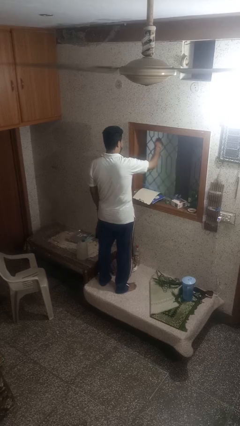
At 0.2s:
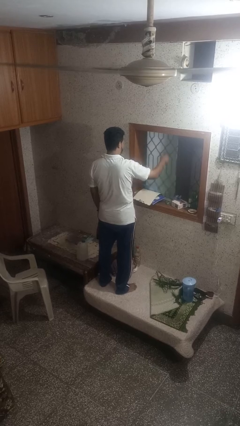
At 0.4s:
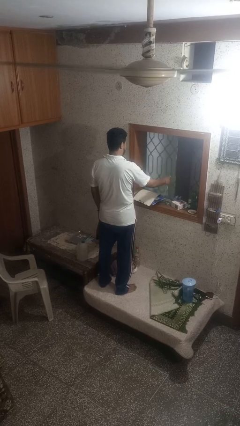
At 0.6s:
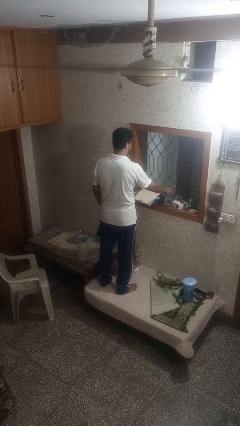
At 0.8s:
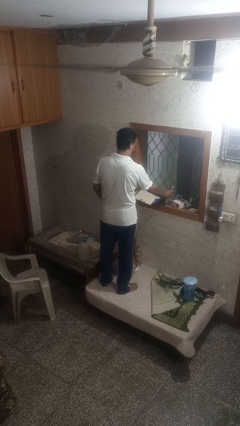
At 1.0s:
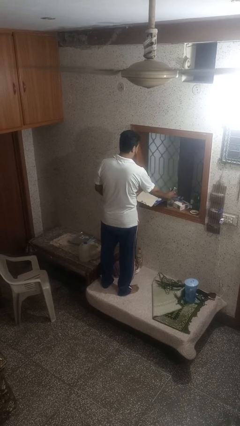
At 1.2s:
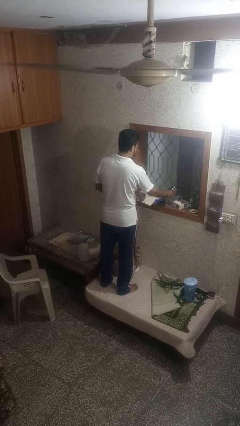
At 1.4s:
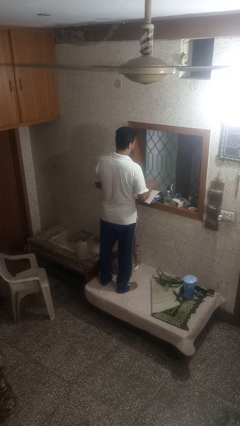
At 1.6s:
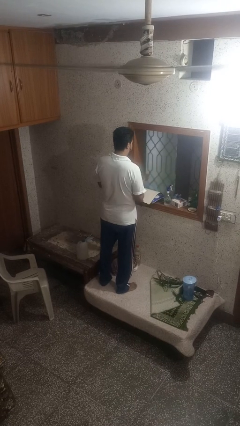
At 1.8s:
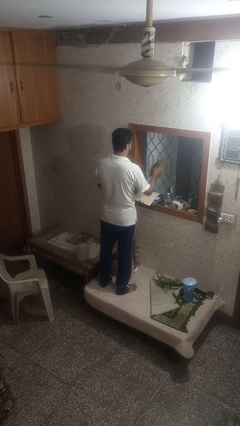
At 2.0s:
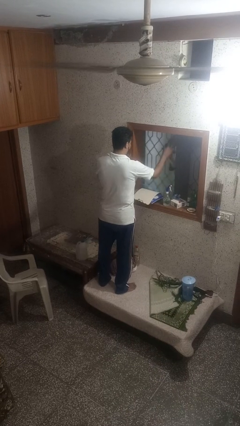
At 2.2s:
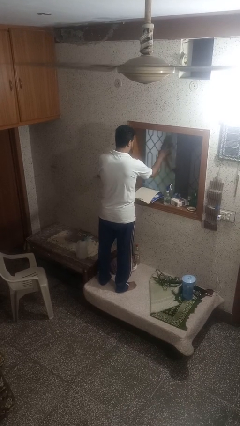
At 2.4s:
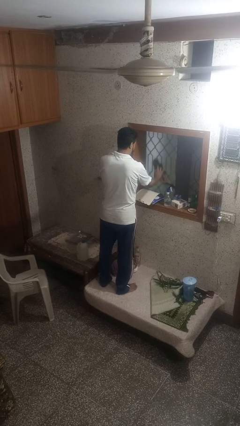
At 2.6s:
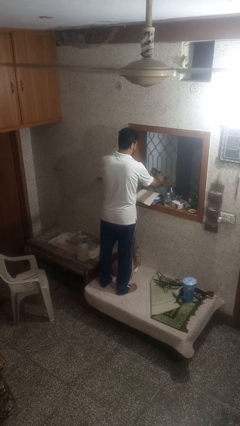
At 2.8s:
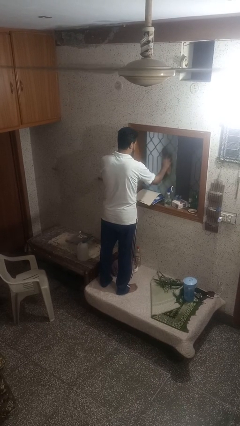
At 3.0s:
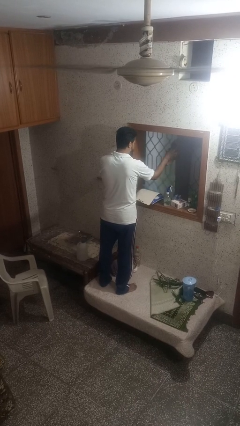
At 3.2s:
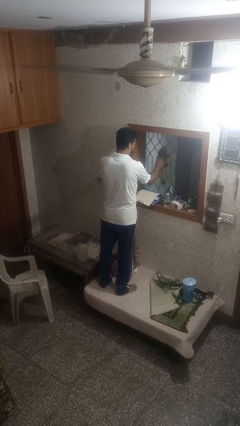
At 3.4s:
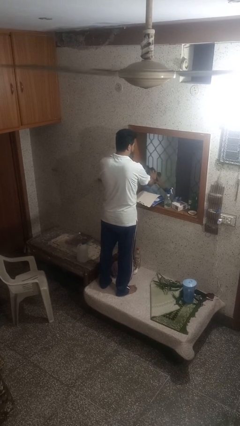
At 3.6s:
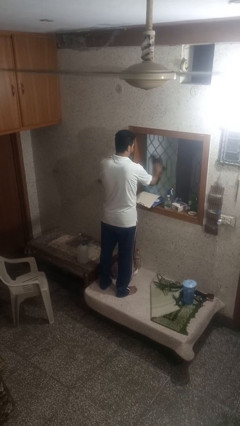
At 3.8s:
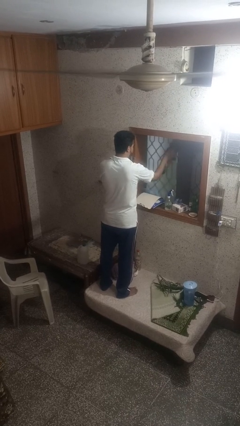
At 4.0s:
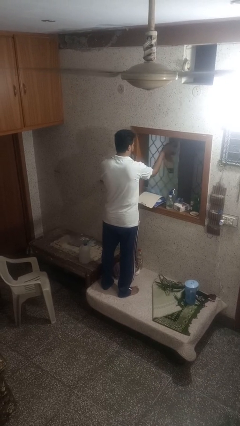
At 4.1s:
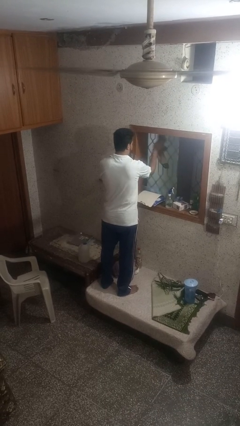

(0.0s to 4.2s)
person washes window

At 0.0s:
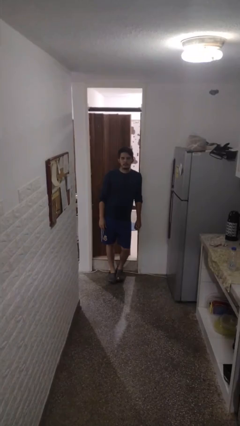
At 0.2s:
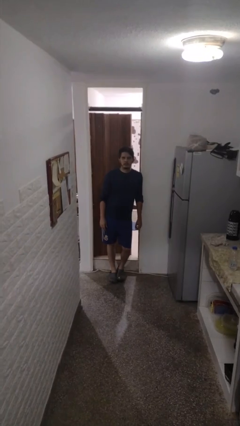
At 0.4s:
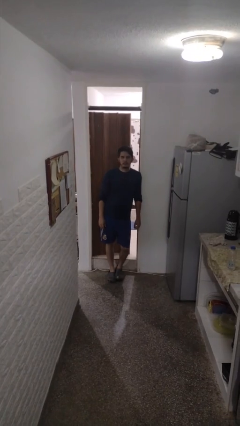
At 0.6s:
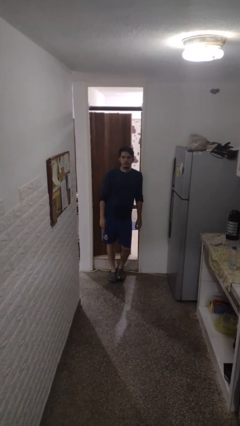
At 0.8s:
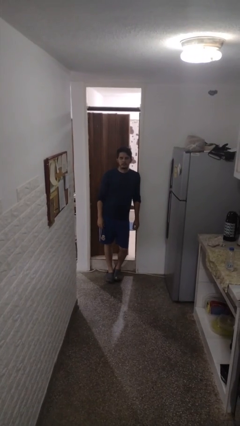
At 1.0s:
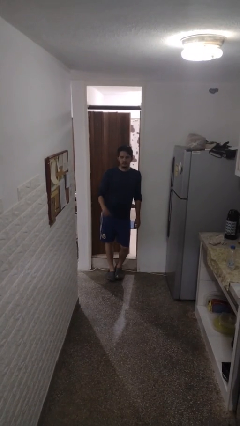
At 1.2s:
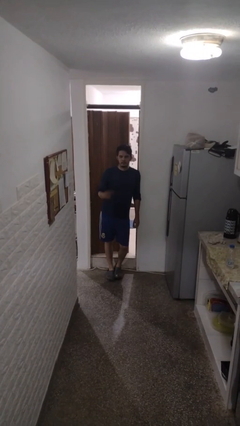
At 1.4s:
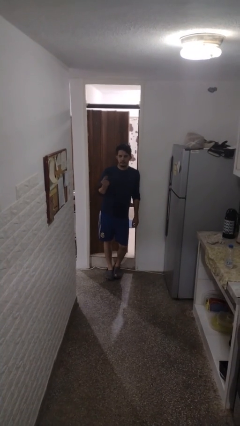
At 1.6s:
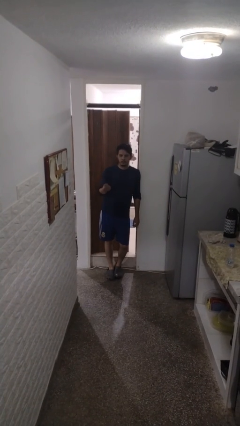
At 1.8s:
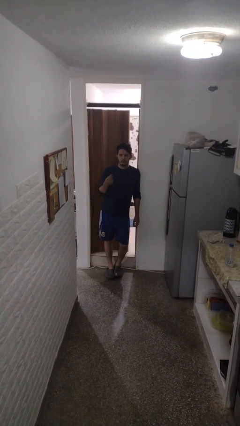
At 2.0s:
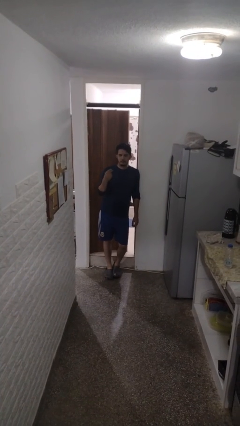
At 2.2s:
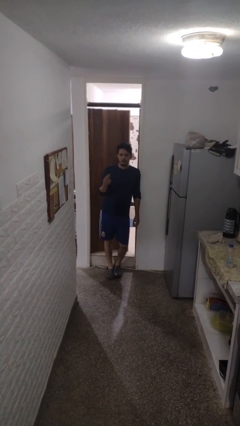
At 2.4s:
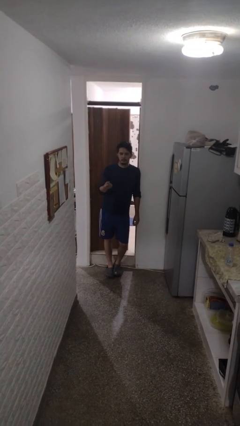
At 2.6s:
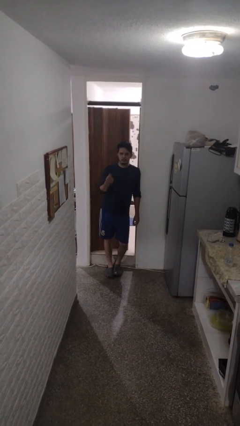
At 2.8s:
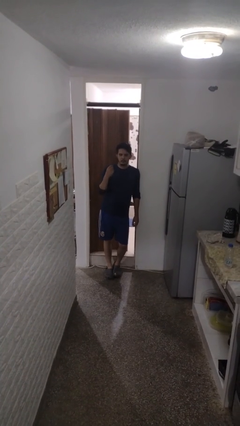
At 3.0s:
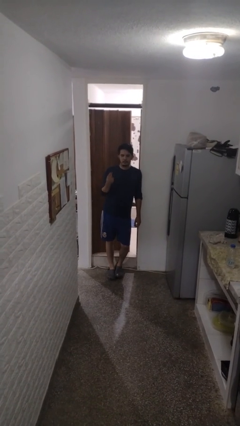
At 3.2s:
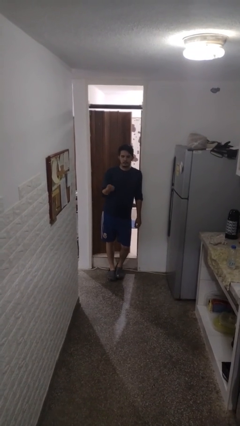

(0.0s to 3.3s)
person snaps fingers

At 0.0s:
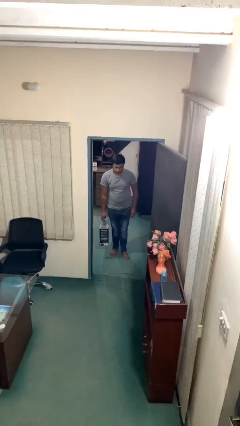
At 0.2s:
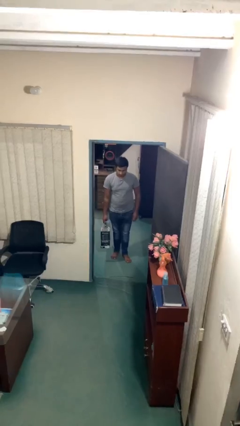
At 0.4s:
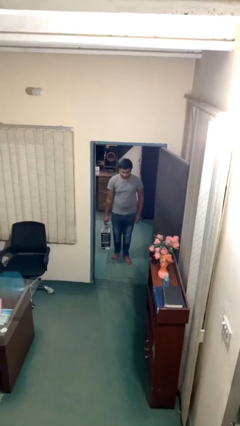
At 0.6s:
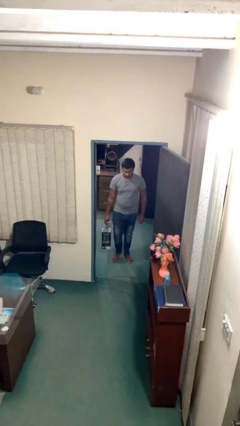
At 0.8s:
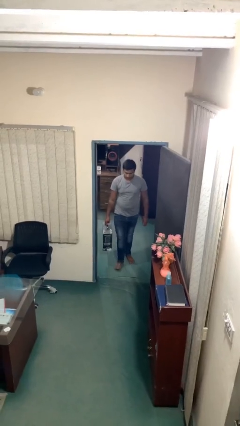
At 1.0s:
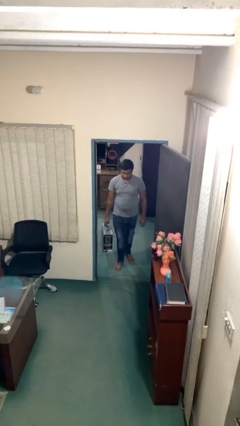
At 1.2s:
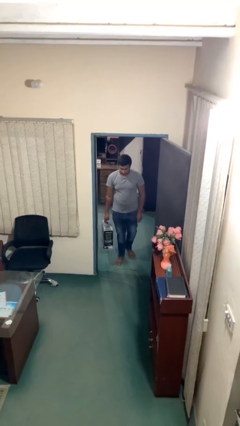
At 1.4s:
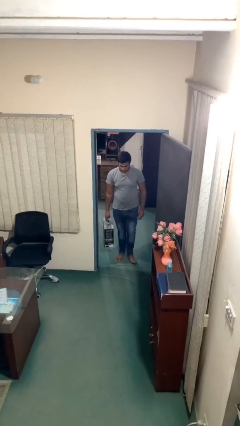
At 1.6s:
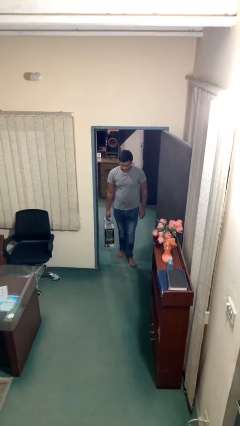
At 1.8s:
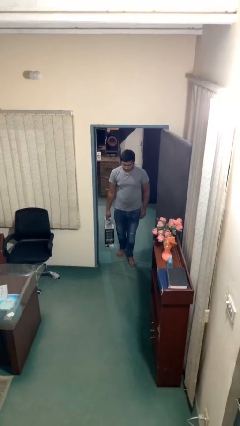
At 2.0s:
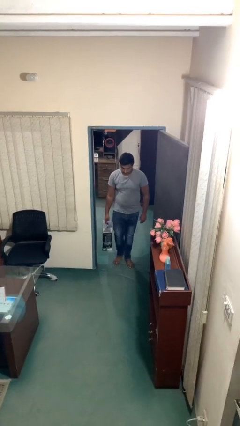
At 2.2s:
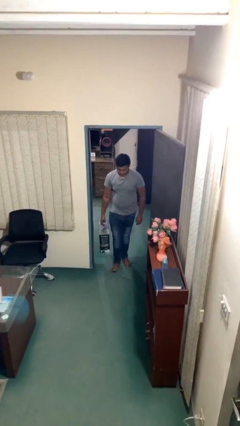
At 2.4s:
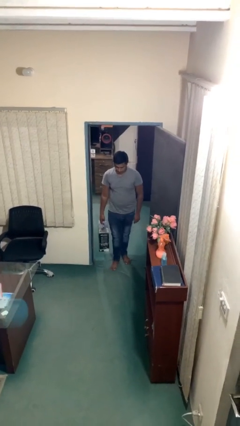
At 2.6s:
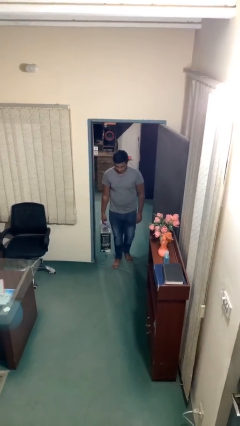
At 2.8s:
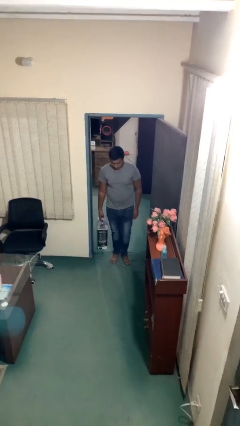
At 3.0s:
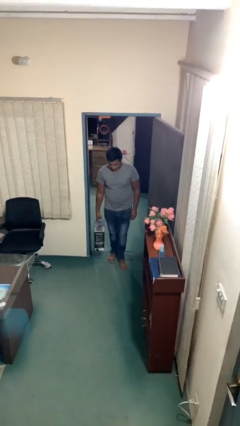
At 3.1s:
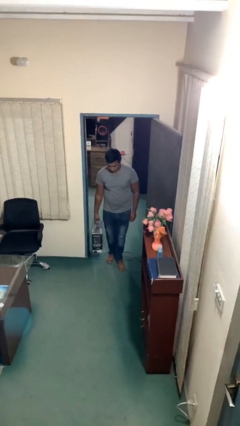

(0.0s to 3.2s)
person carries heavy object

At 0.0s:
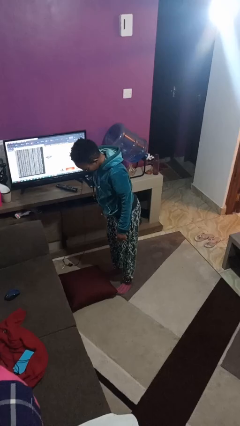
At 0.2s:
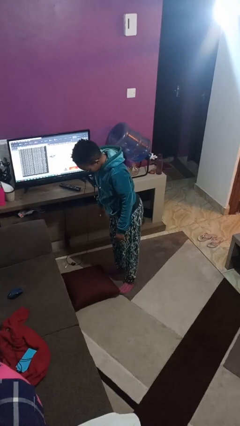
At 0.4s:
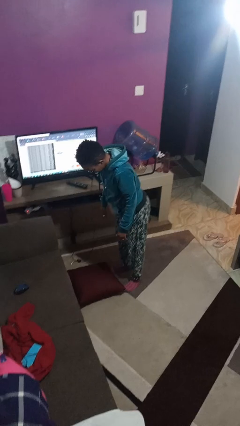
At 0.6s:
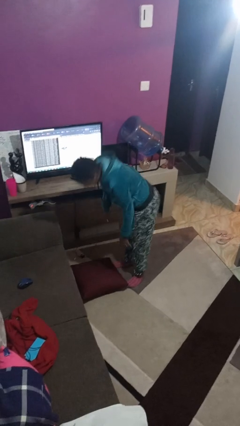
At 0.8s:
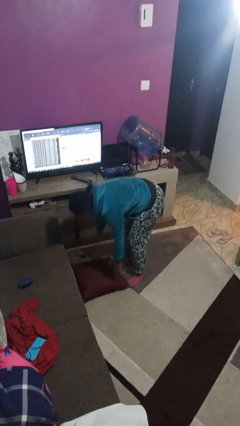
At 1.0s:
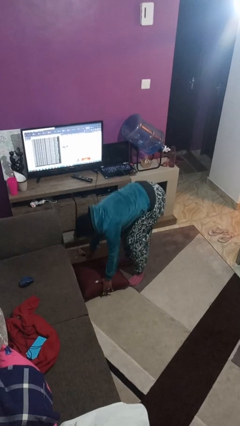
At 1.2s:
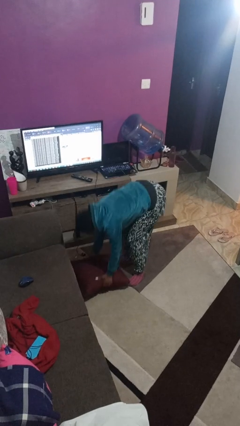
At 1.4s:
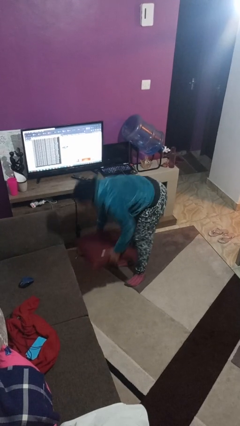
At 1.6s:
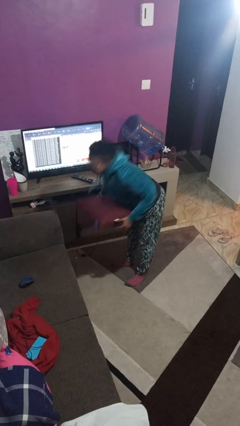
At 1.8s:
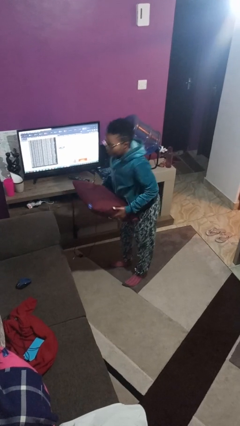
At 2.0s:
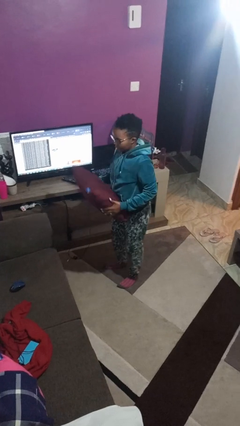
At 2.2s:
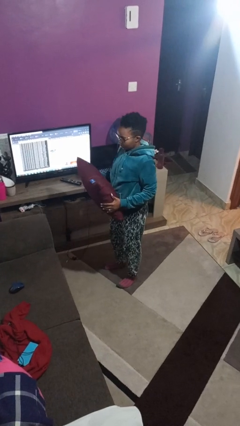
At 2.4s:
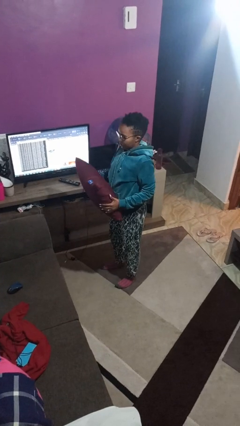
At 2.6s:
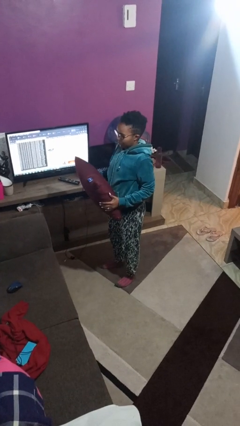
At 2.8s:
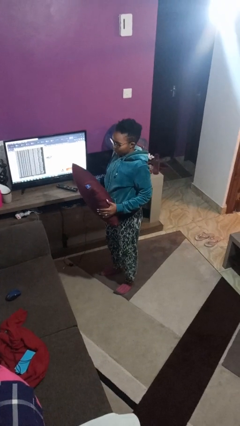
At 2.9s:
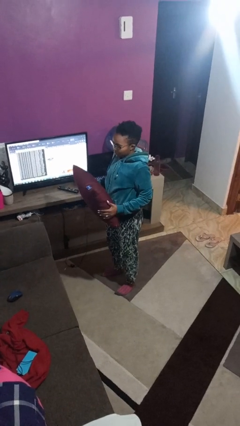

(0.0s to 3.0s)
person picks up object from floor

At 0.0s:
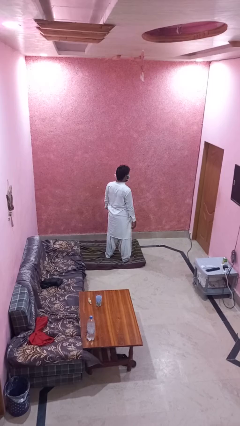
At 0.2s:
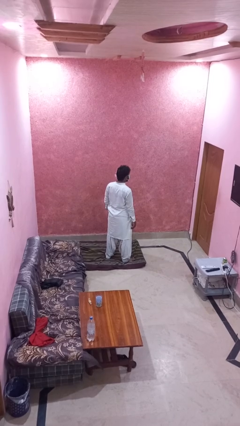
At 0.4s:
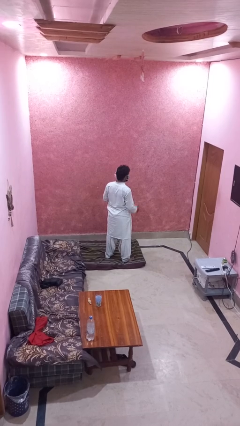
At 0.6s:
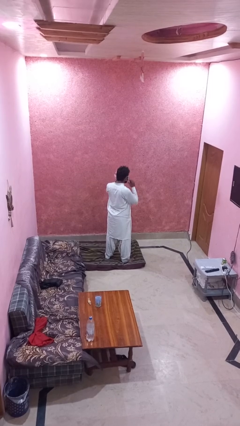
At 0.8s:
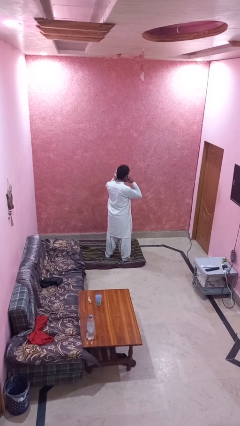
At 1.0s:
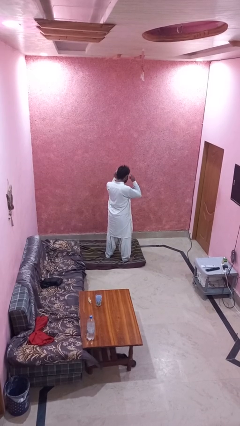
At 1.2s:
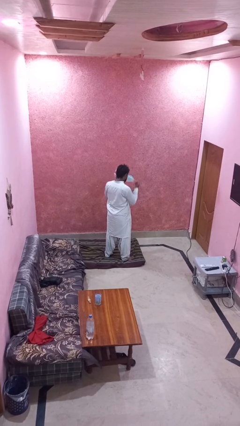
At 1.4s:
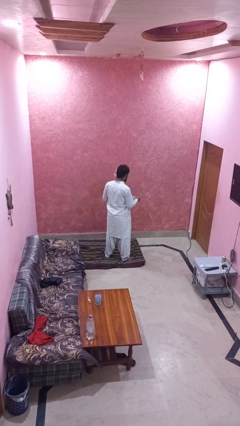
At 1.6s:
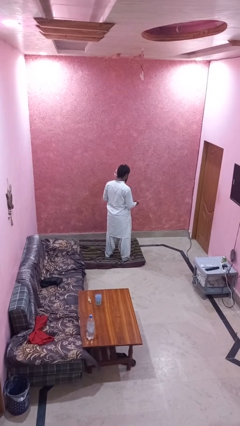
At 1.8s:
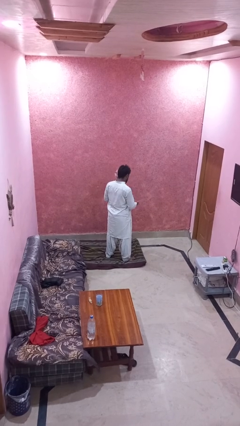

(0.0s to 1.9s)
person takes off facemask

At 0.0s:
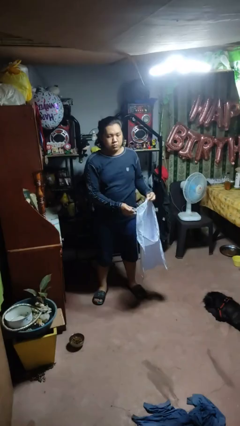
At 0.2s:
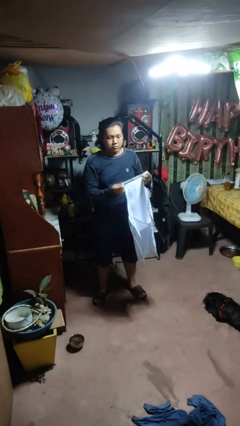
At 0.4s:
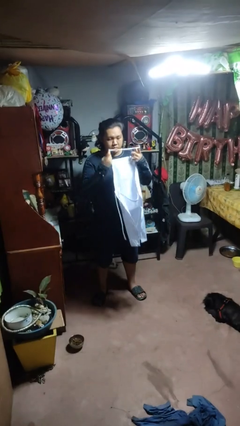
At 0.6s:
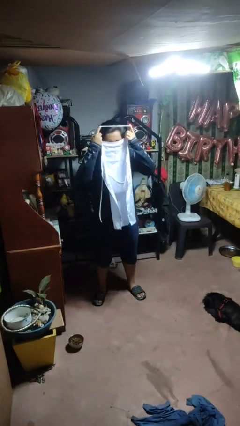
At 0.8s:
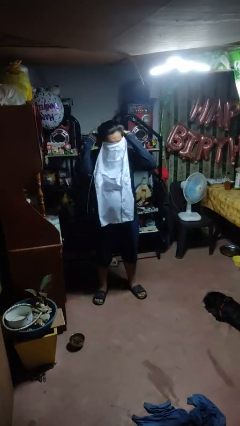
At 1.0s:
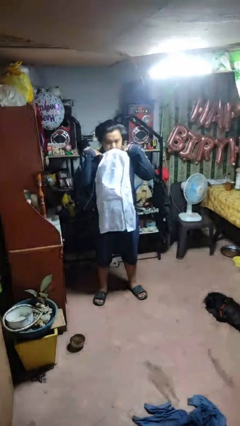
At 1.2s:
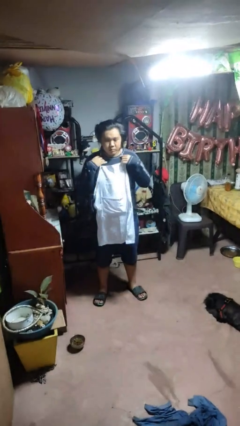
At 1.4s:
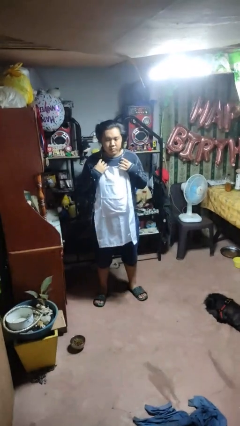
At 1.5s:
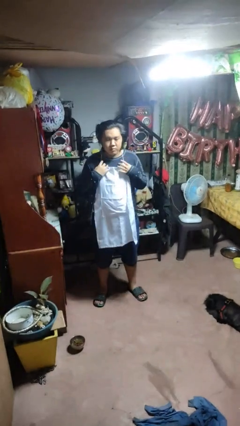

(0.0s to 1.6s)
person puts on apron

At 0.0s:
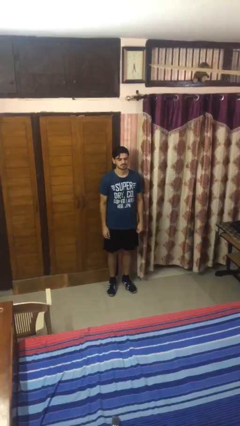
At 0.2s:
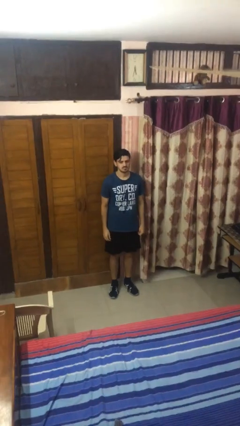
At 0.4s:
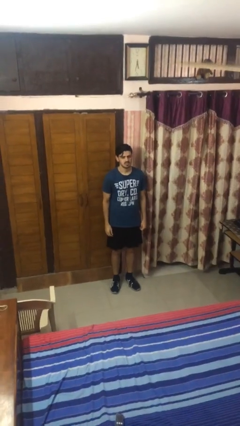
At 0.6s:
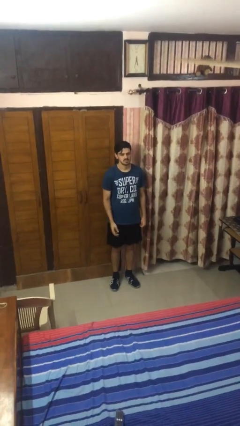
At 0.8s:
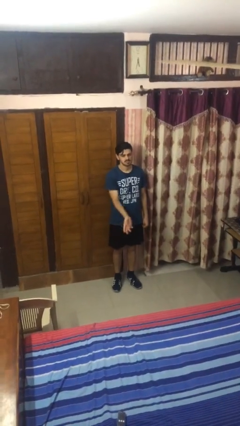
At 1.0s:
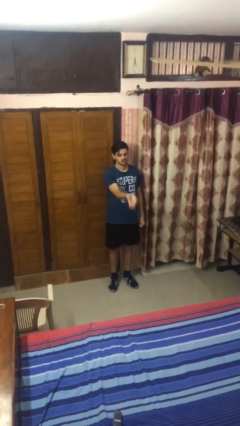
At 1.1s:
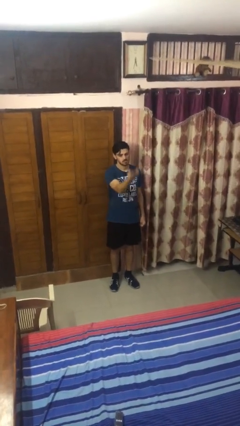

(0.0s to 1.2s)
person gestures swipe up
